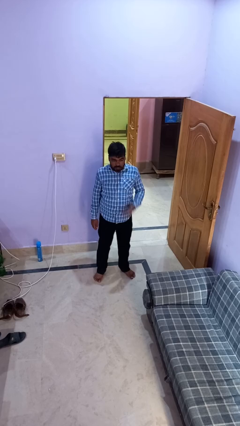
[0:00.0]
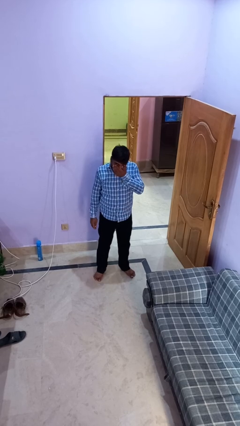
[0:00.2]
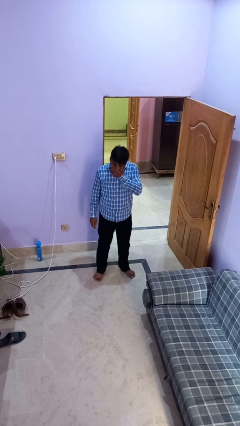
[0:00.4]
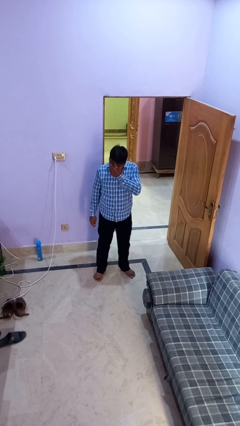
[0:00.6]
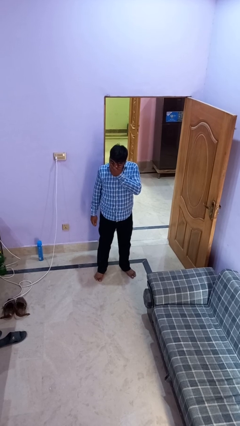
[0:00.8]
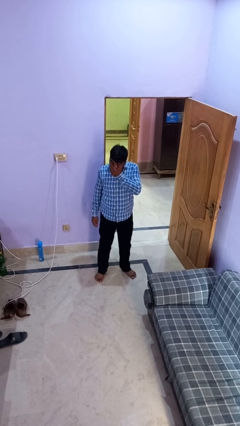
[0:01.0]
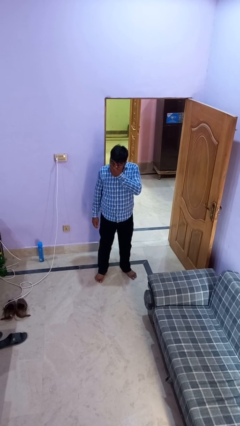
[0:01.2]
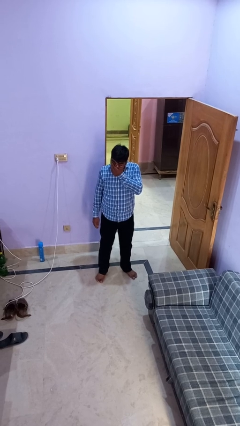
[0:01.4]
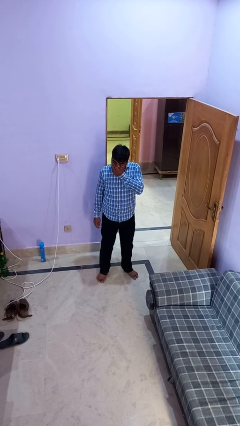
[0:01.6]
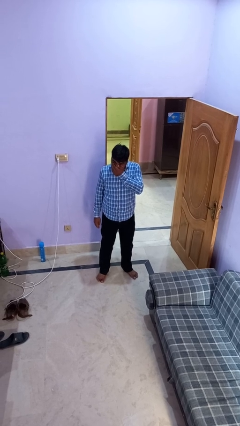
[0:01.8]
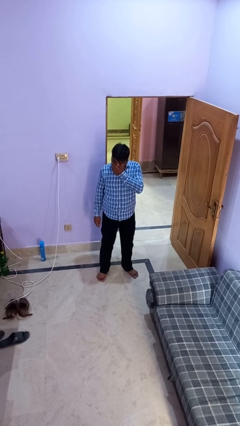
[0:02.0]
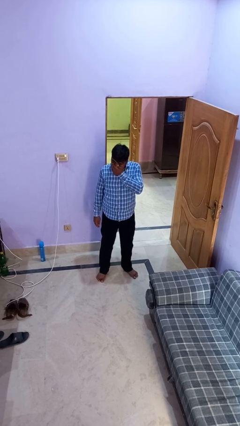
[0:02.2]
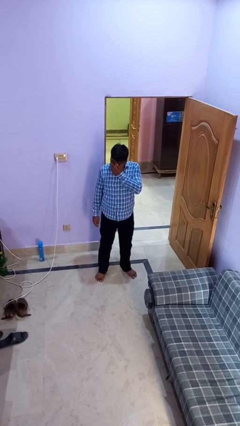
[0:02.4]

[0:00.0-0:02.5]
person sneezes into hand

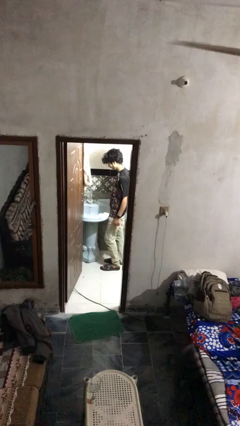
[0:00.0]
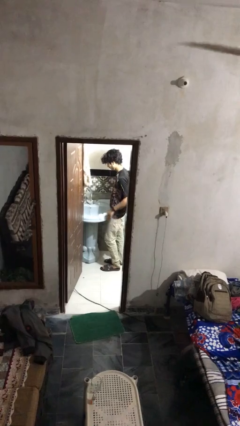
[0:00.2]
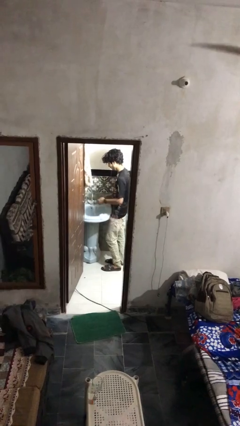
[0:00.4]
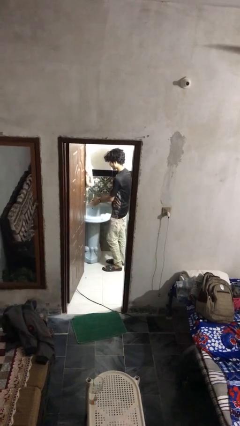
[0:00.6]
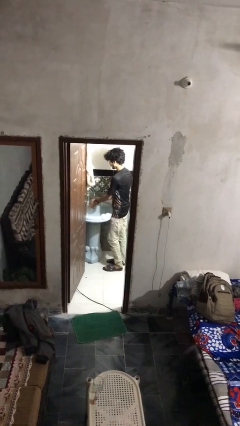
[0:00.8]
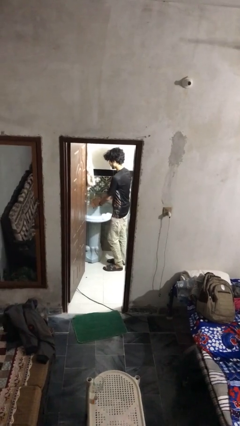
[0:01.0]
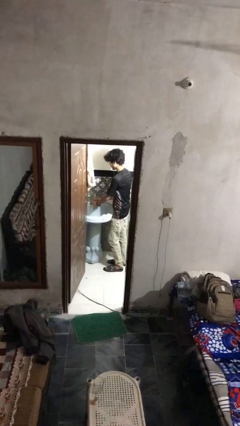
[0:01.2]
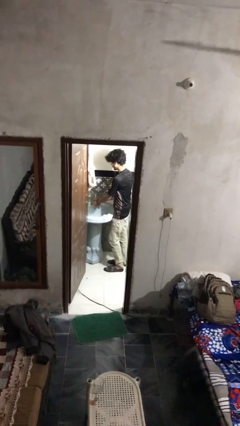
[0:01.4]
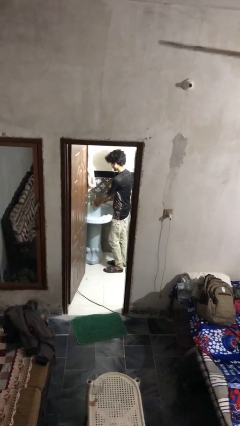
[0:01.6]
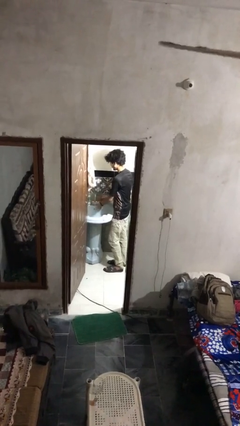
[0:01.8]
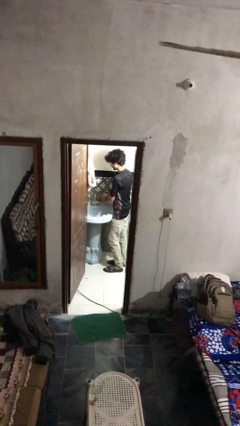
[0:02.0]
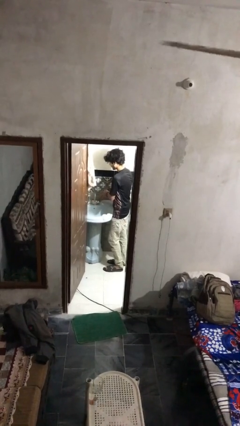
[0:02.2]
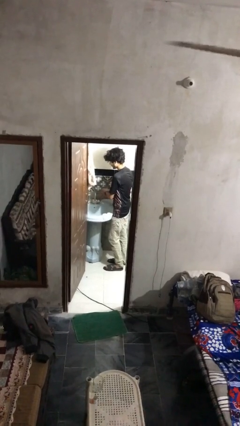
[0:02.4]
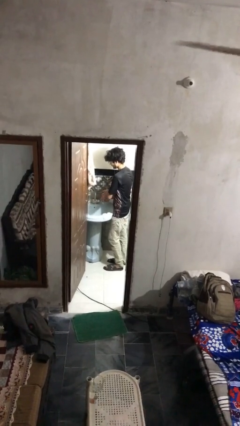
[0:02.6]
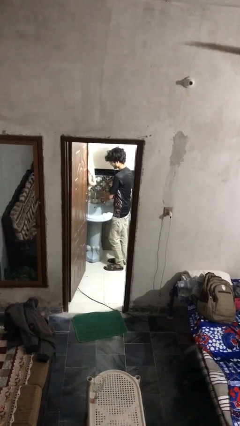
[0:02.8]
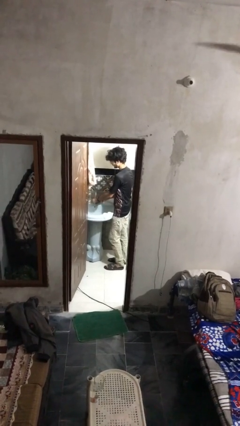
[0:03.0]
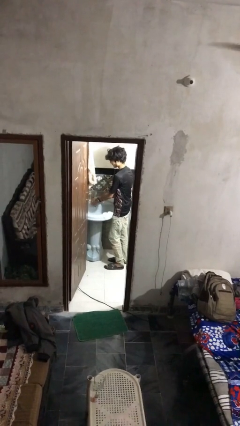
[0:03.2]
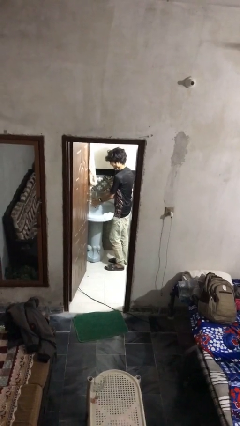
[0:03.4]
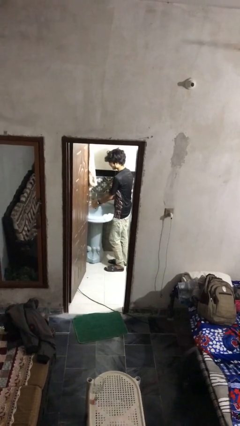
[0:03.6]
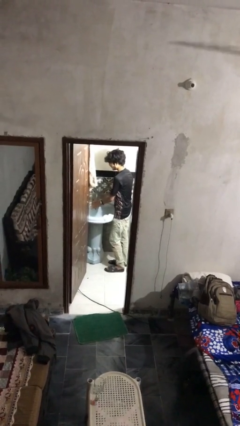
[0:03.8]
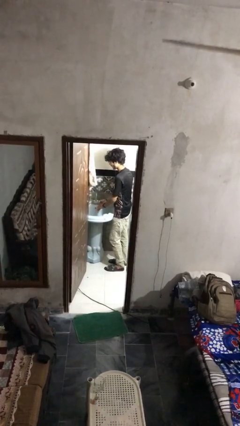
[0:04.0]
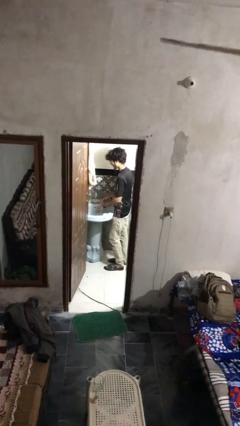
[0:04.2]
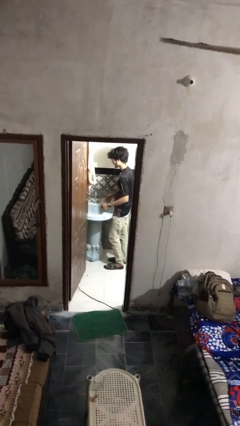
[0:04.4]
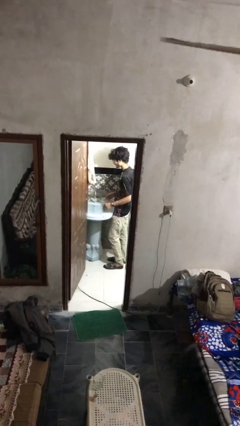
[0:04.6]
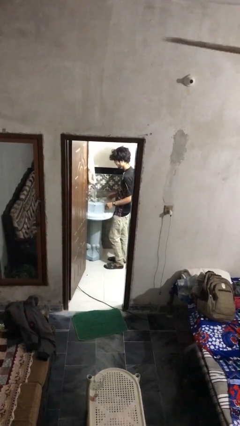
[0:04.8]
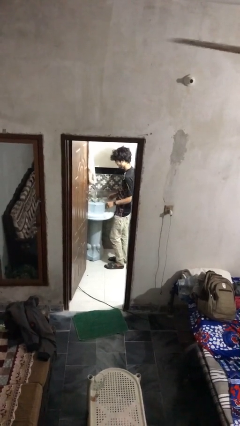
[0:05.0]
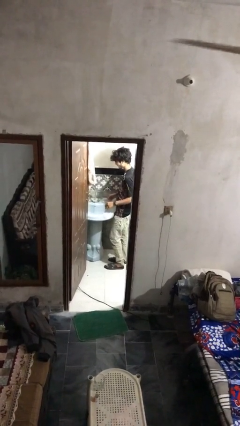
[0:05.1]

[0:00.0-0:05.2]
person washes hands

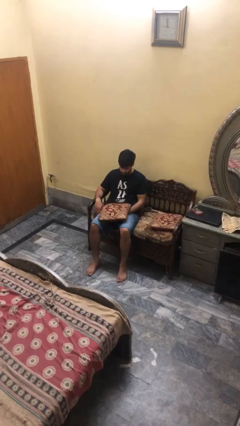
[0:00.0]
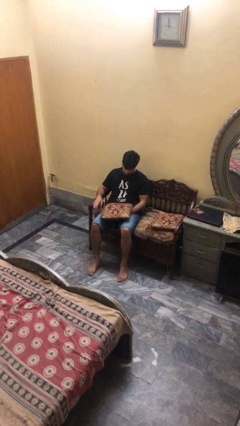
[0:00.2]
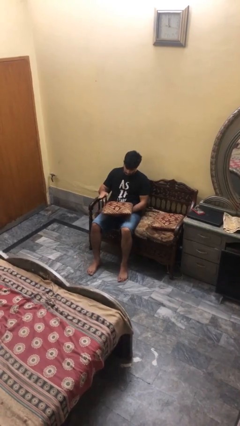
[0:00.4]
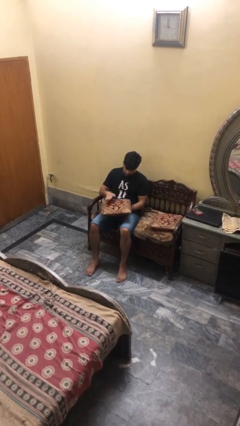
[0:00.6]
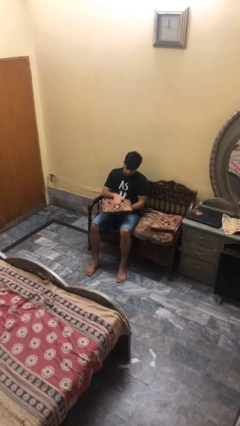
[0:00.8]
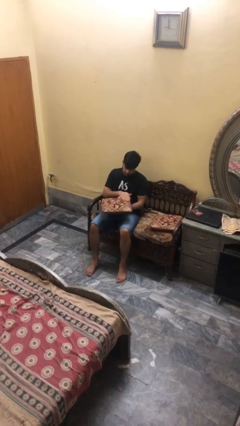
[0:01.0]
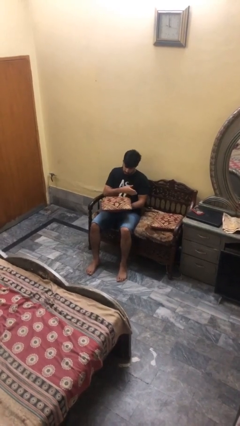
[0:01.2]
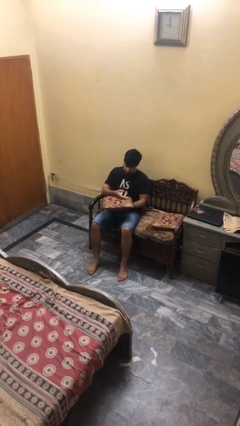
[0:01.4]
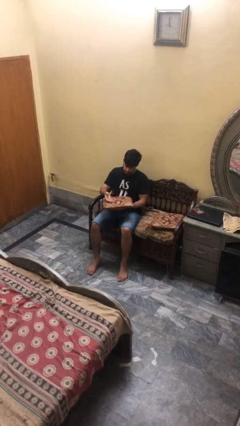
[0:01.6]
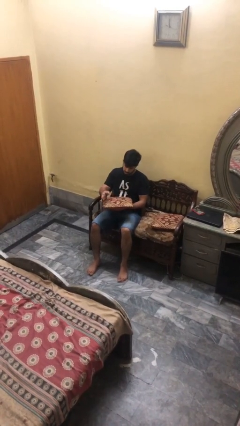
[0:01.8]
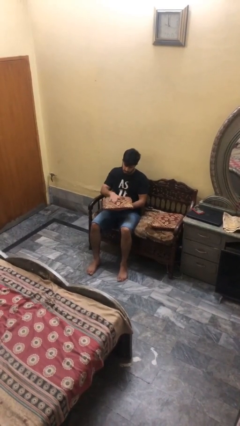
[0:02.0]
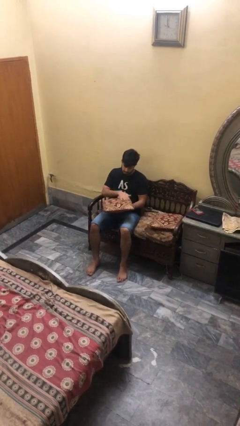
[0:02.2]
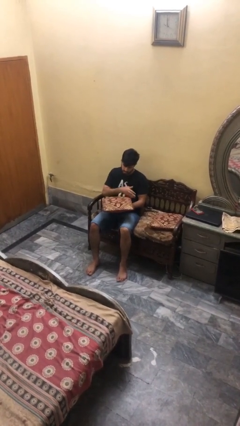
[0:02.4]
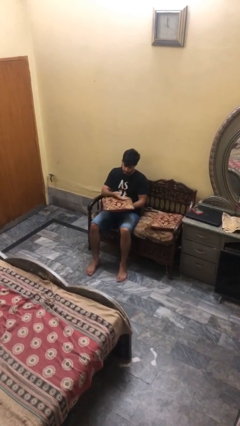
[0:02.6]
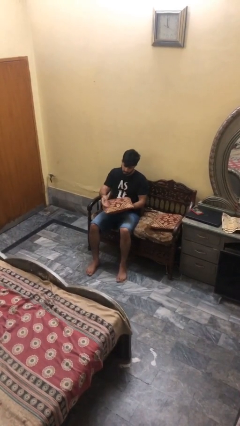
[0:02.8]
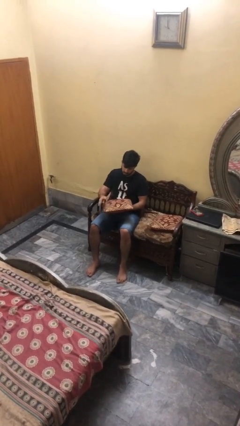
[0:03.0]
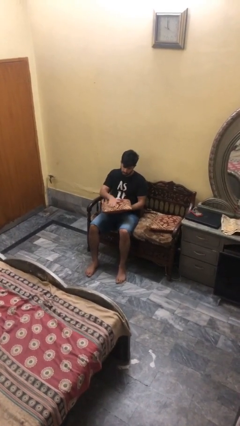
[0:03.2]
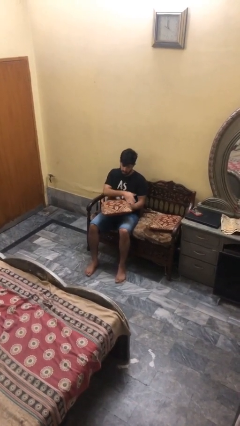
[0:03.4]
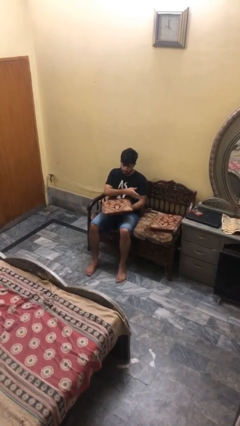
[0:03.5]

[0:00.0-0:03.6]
person waves hand over object

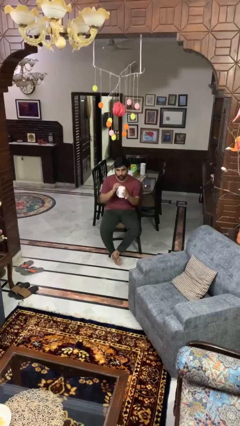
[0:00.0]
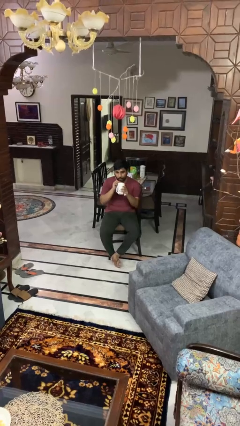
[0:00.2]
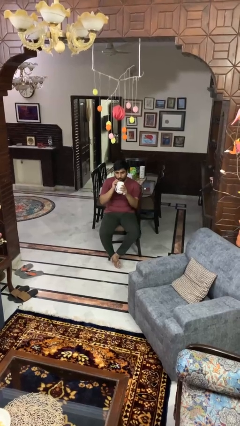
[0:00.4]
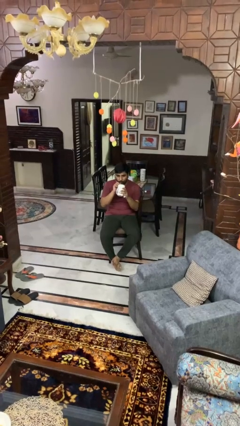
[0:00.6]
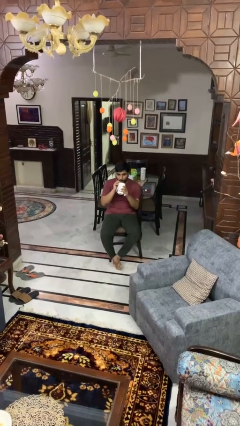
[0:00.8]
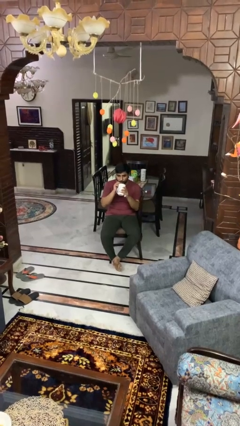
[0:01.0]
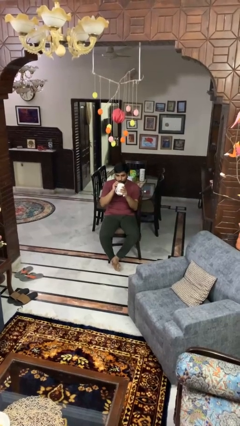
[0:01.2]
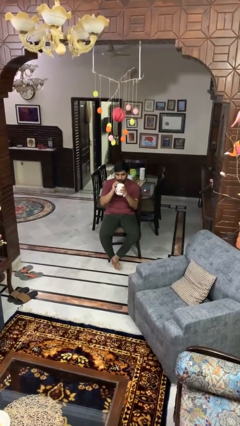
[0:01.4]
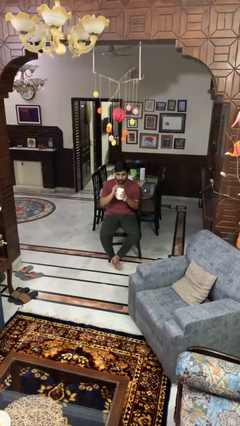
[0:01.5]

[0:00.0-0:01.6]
person drinks from straw

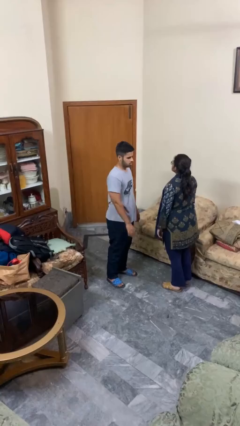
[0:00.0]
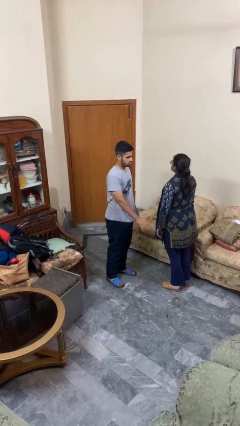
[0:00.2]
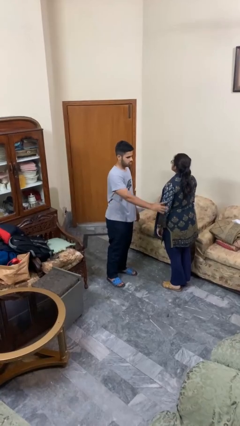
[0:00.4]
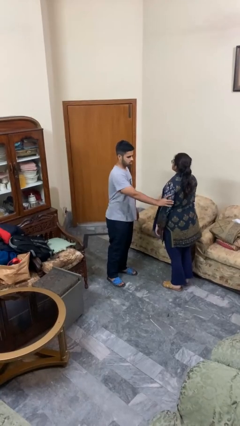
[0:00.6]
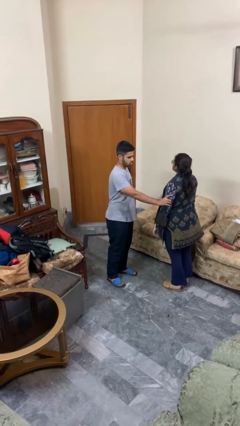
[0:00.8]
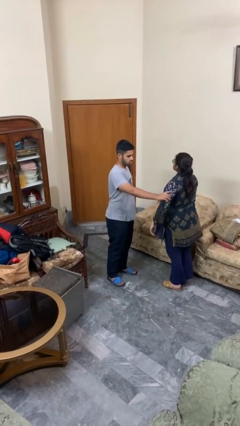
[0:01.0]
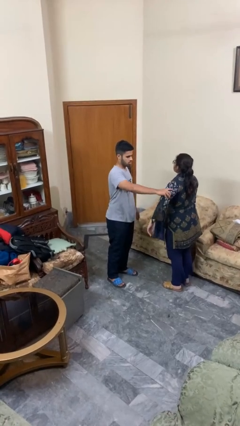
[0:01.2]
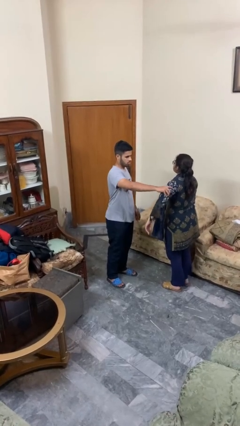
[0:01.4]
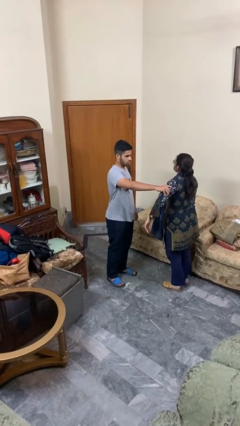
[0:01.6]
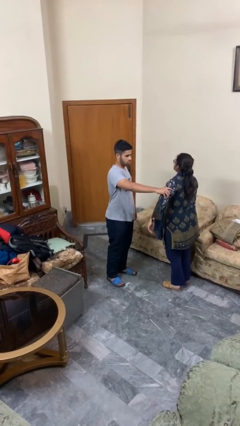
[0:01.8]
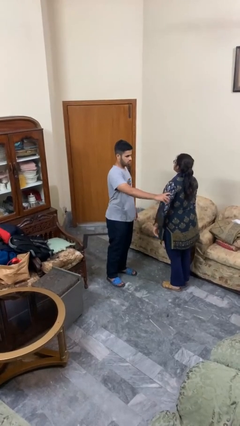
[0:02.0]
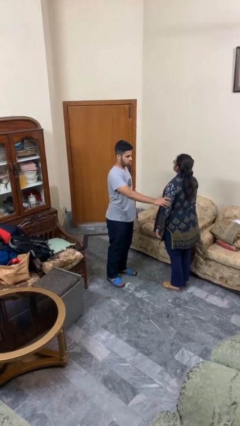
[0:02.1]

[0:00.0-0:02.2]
person grabs person by bicep

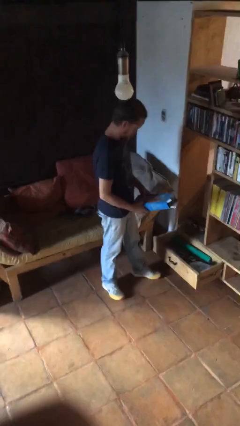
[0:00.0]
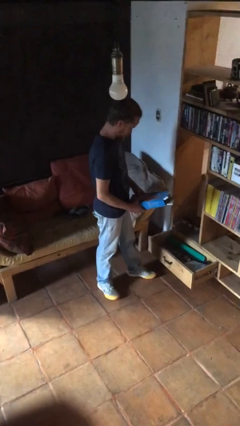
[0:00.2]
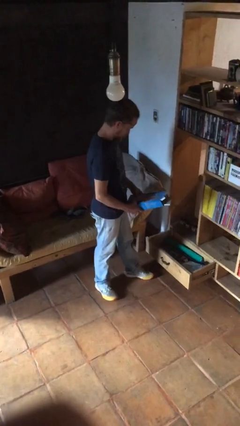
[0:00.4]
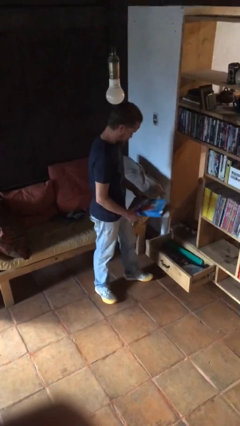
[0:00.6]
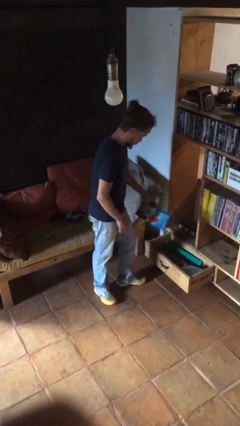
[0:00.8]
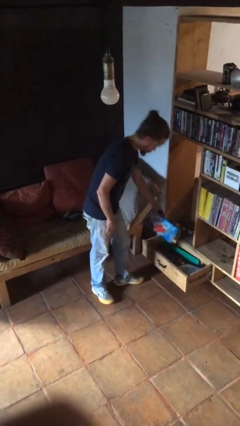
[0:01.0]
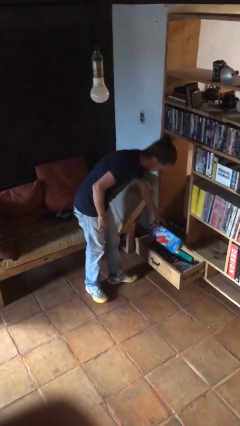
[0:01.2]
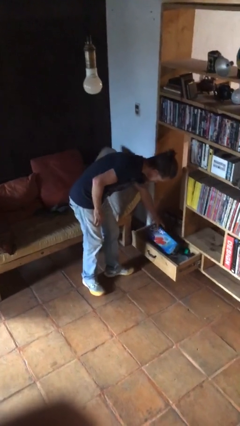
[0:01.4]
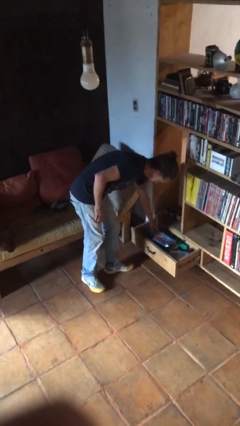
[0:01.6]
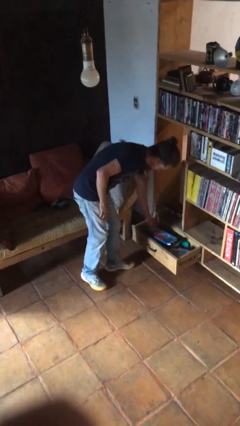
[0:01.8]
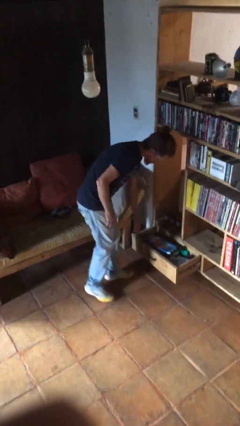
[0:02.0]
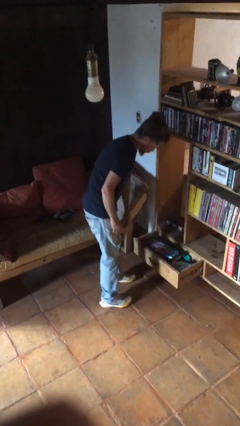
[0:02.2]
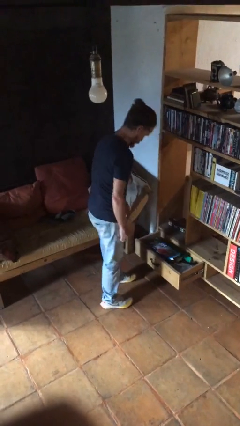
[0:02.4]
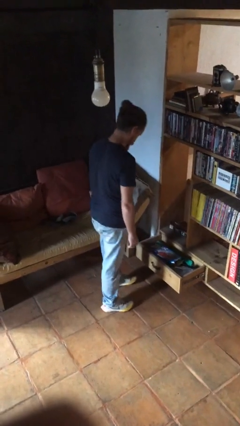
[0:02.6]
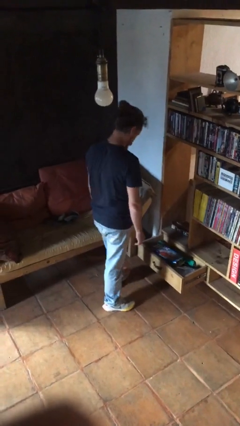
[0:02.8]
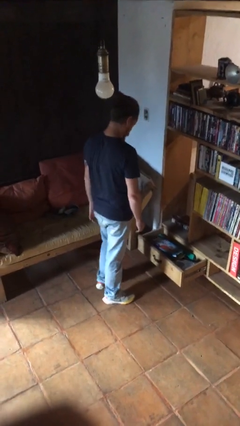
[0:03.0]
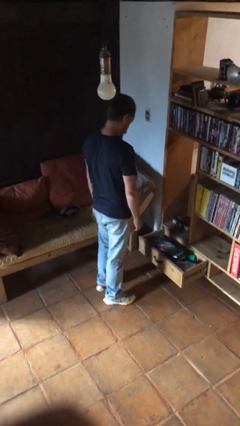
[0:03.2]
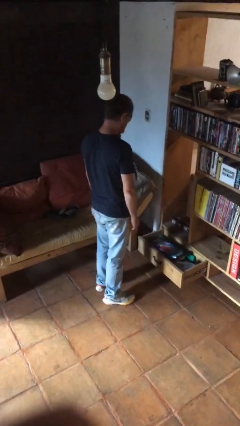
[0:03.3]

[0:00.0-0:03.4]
person puts down object into cabinet
